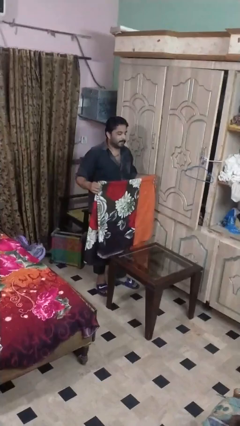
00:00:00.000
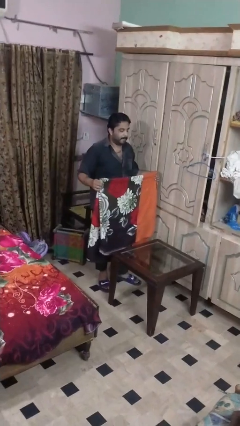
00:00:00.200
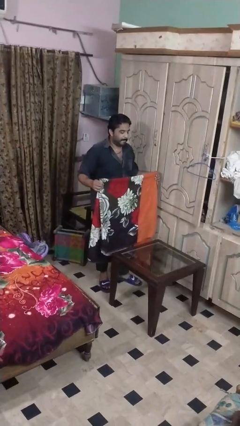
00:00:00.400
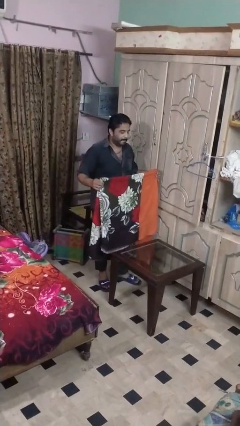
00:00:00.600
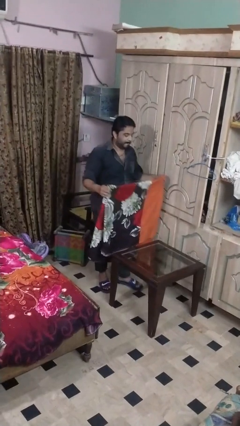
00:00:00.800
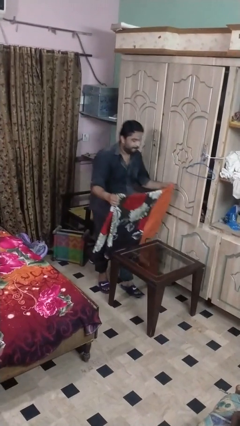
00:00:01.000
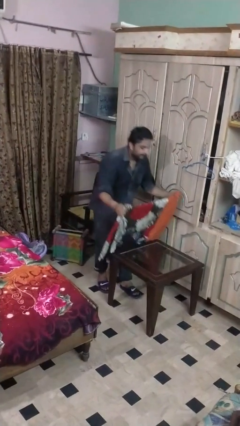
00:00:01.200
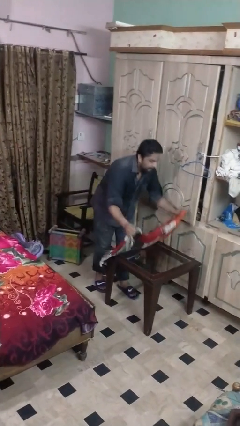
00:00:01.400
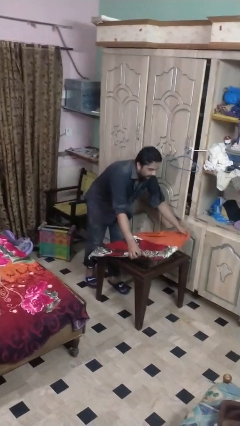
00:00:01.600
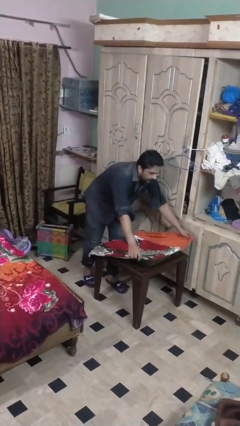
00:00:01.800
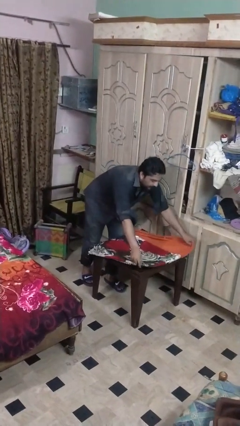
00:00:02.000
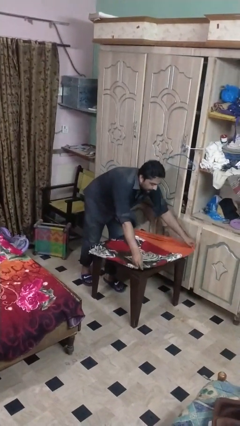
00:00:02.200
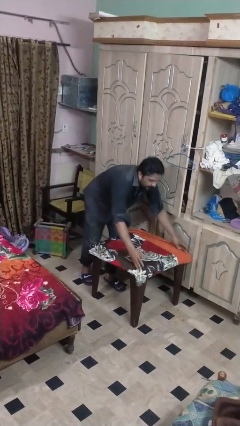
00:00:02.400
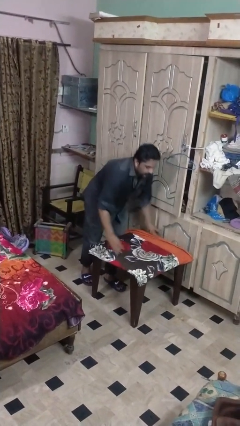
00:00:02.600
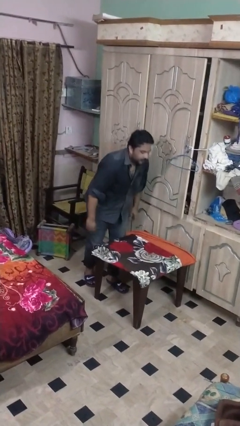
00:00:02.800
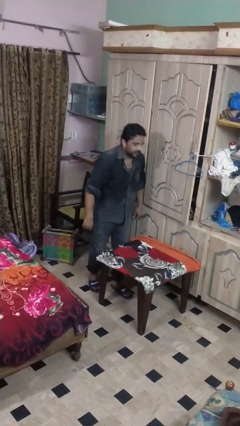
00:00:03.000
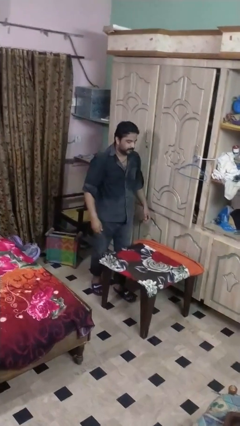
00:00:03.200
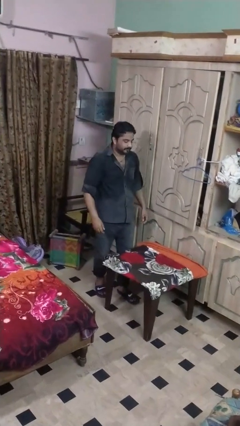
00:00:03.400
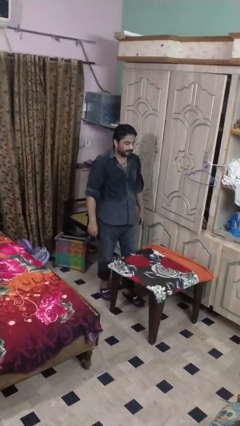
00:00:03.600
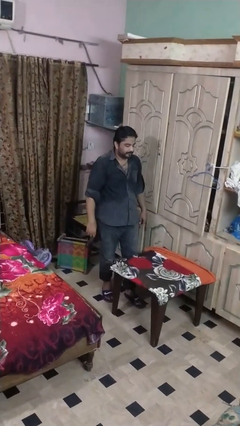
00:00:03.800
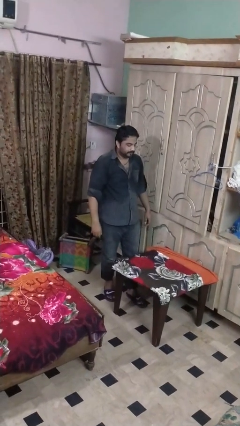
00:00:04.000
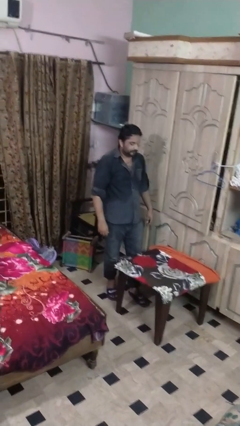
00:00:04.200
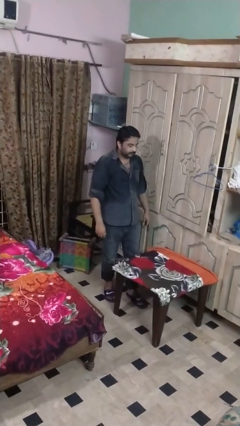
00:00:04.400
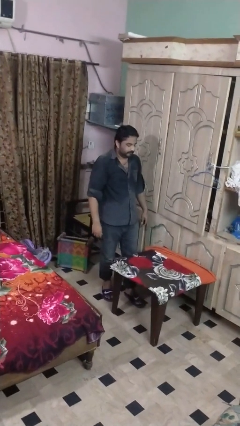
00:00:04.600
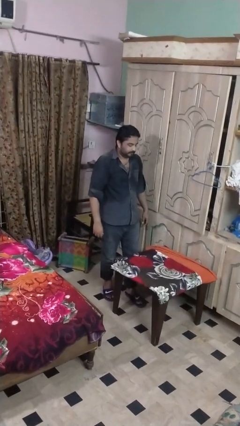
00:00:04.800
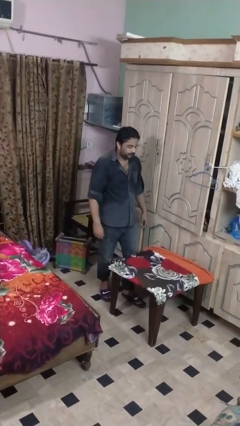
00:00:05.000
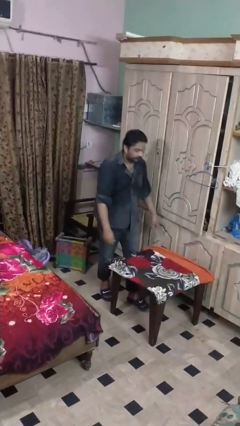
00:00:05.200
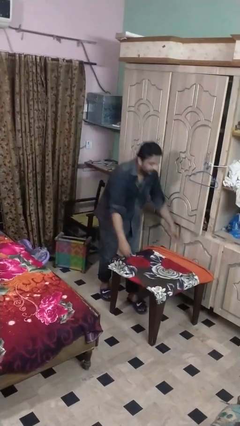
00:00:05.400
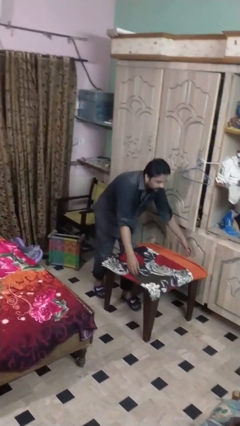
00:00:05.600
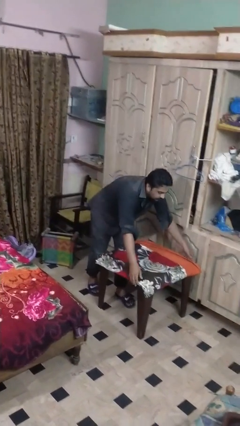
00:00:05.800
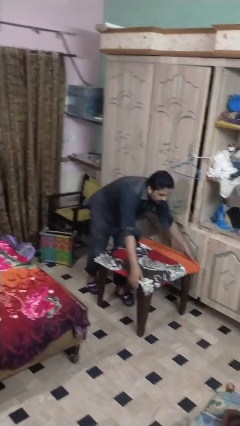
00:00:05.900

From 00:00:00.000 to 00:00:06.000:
person spreads tablecloth

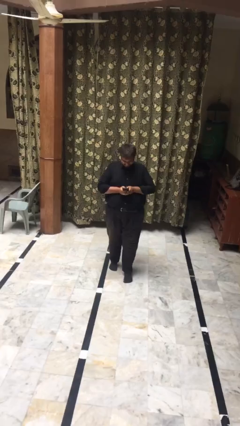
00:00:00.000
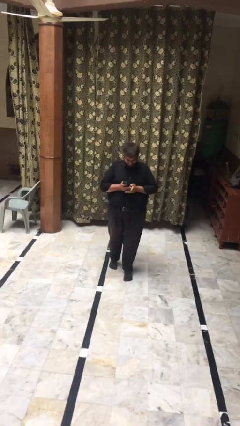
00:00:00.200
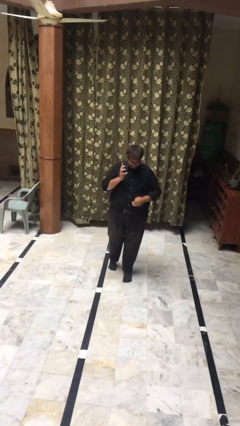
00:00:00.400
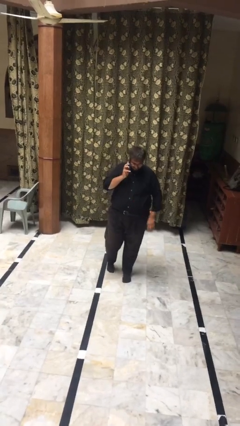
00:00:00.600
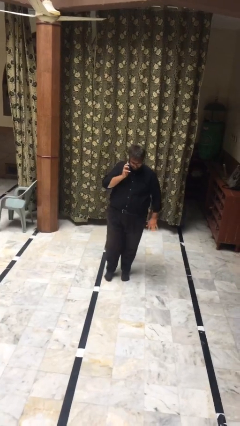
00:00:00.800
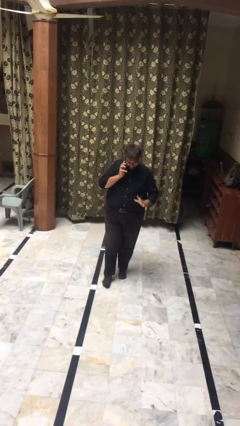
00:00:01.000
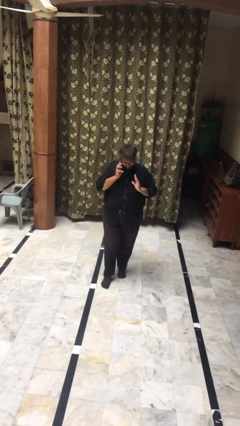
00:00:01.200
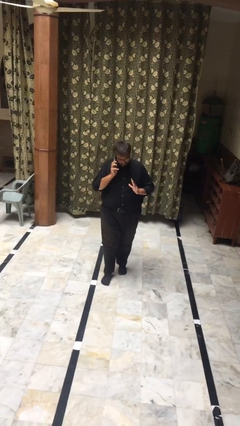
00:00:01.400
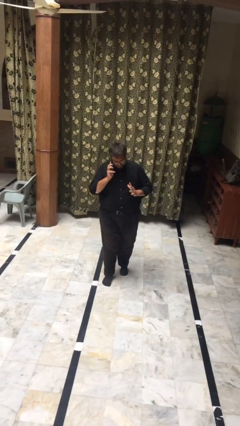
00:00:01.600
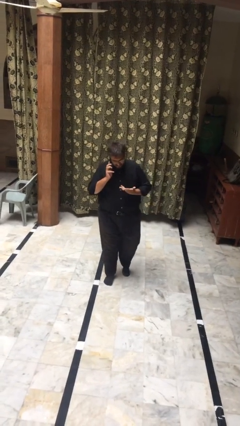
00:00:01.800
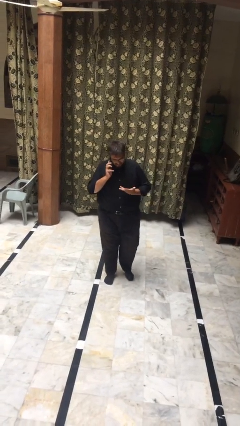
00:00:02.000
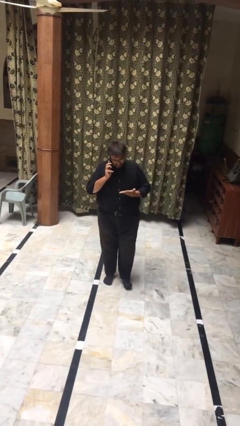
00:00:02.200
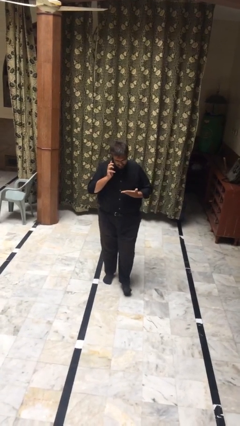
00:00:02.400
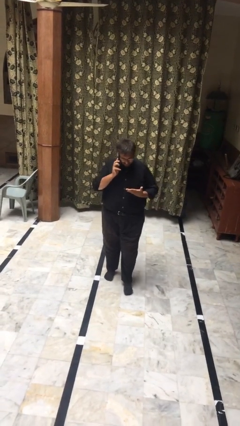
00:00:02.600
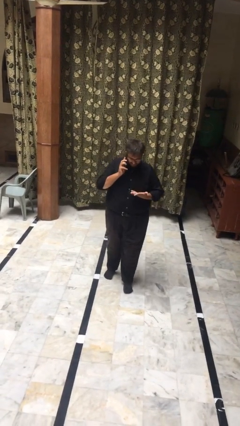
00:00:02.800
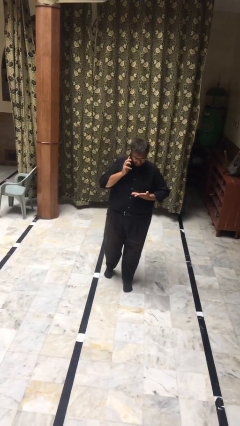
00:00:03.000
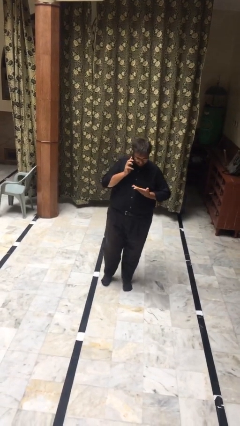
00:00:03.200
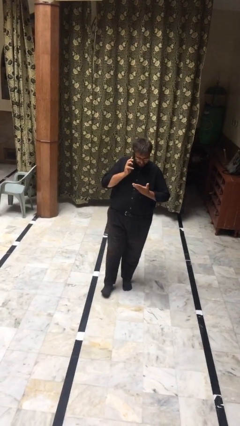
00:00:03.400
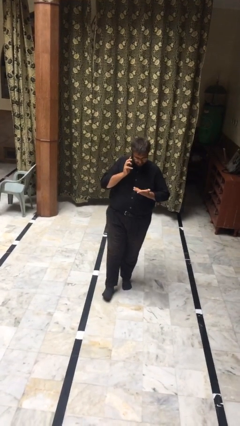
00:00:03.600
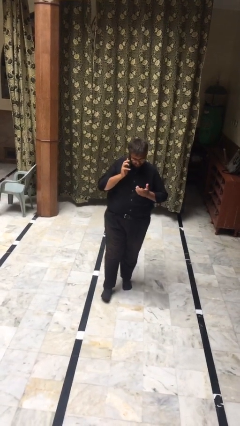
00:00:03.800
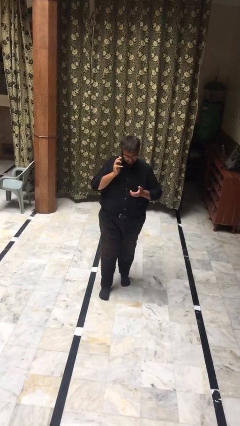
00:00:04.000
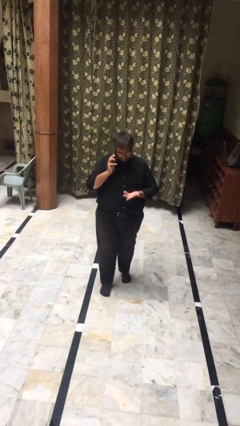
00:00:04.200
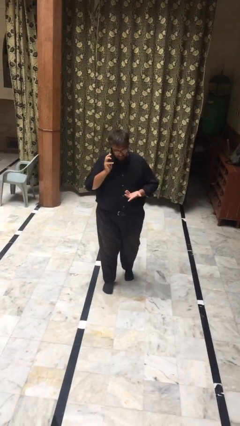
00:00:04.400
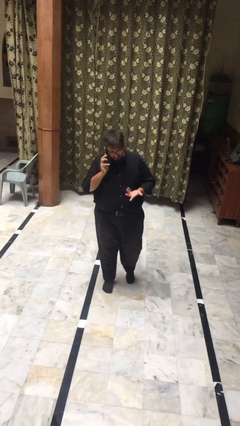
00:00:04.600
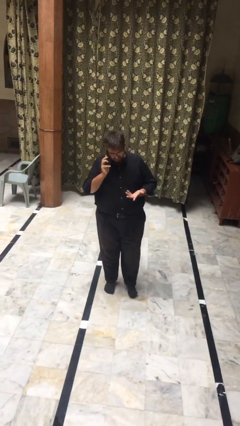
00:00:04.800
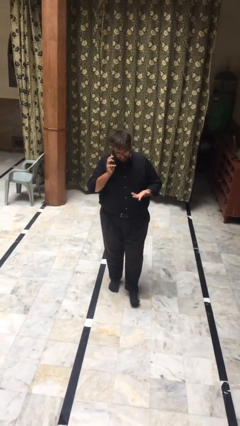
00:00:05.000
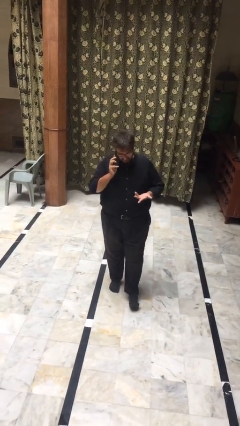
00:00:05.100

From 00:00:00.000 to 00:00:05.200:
person talks on phone

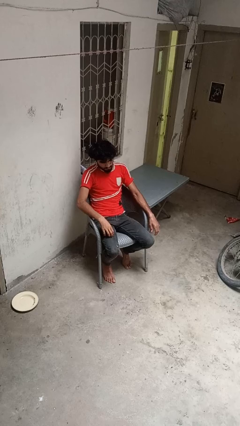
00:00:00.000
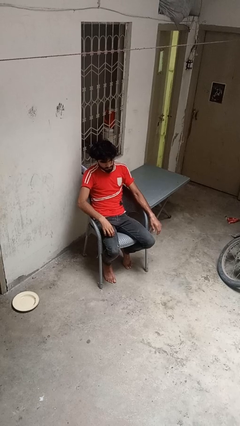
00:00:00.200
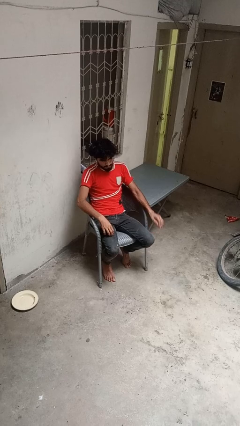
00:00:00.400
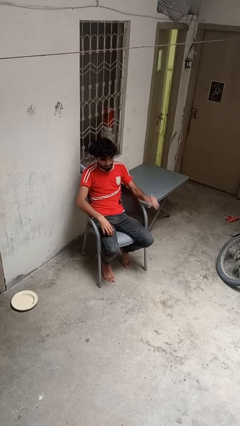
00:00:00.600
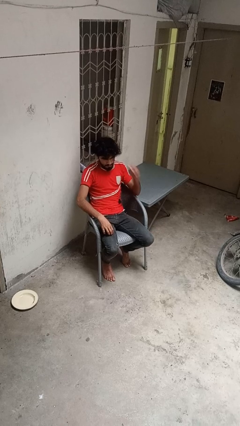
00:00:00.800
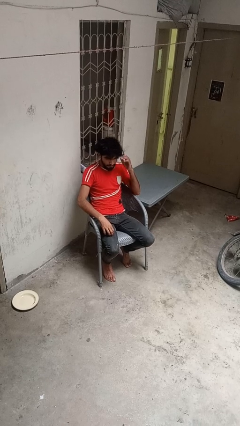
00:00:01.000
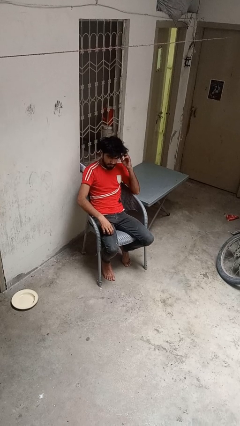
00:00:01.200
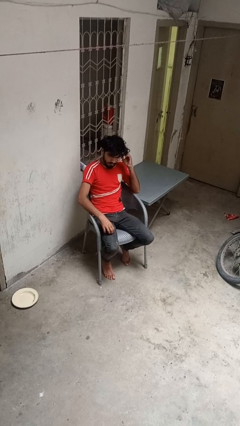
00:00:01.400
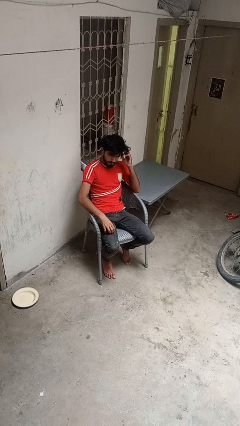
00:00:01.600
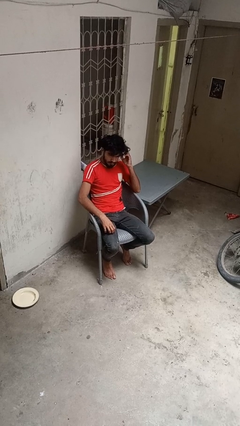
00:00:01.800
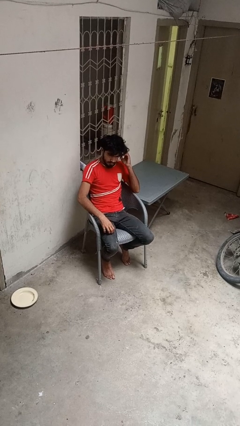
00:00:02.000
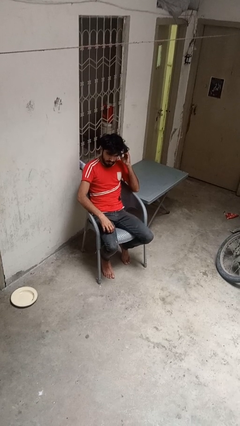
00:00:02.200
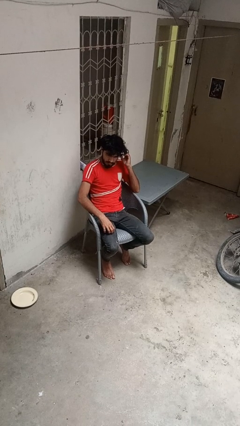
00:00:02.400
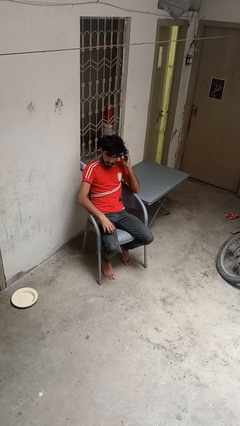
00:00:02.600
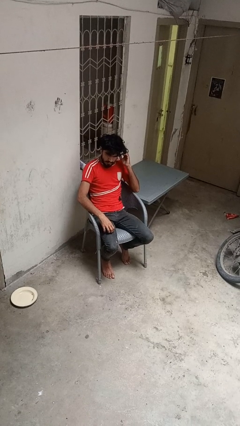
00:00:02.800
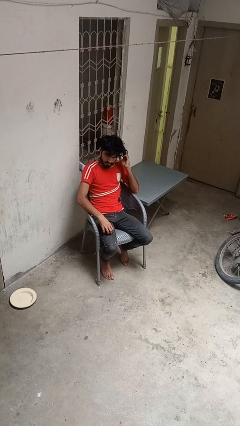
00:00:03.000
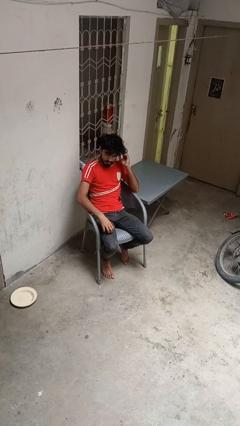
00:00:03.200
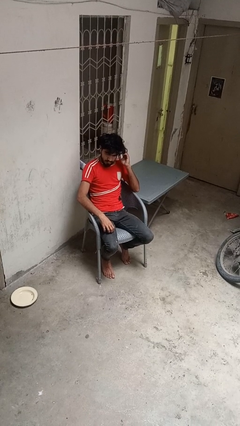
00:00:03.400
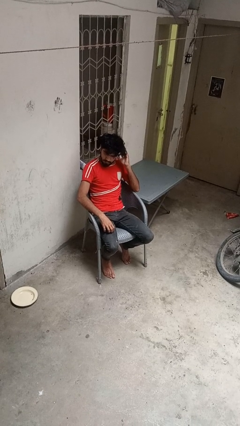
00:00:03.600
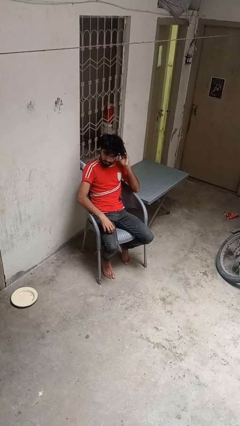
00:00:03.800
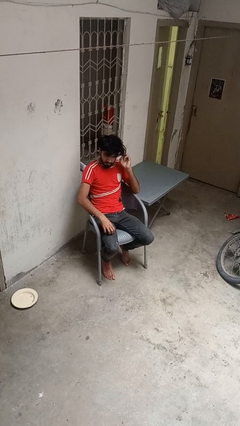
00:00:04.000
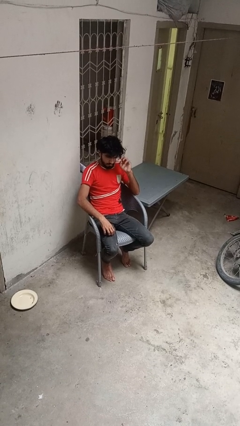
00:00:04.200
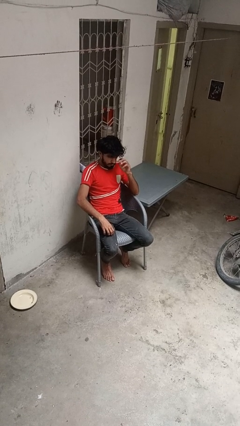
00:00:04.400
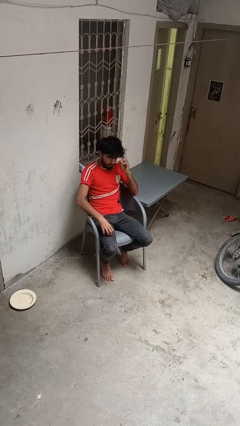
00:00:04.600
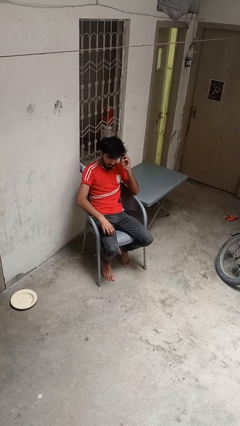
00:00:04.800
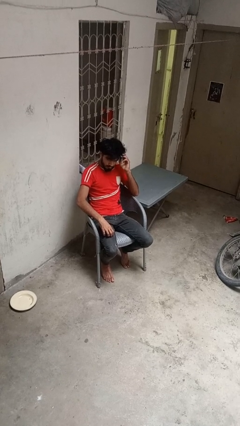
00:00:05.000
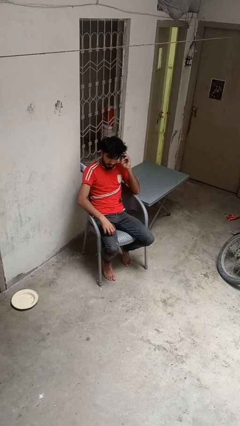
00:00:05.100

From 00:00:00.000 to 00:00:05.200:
person strokes hair

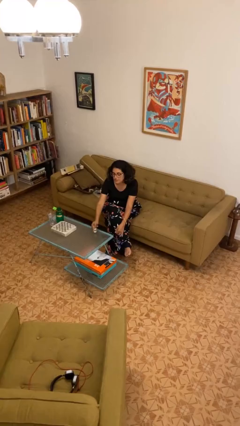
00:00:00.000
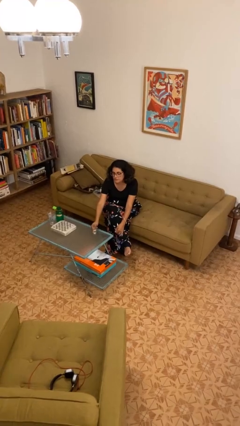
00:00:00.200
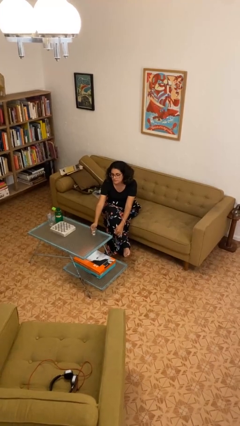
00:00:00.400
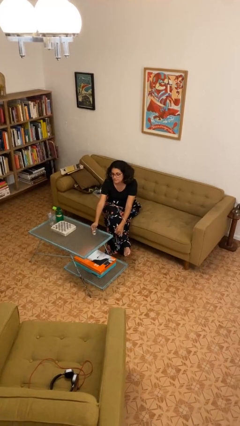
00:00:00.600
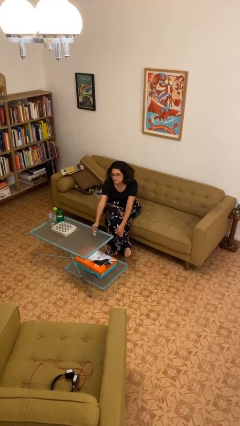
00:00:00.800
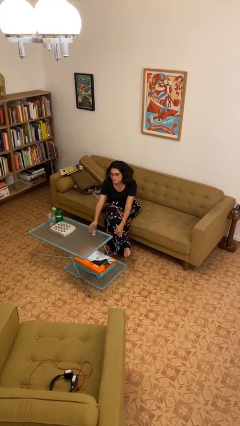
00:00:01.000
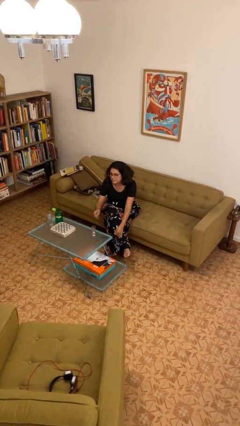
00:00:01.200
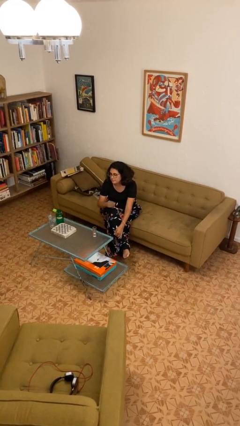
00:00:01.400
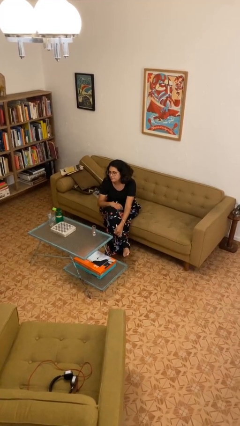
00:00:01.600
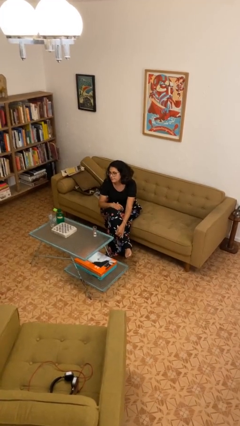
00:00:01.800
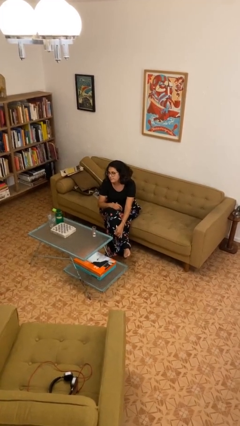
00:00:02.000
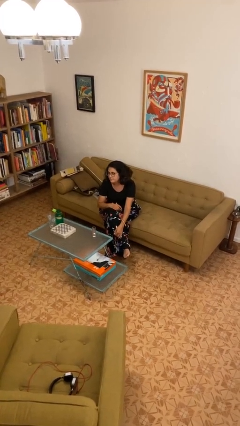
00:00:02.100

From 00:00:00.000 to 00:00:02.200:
person puts down object on table
